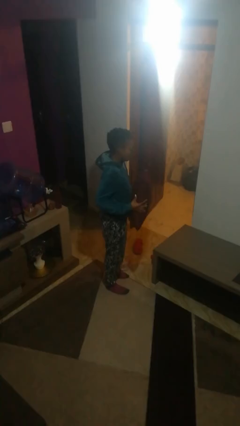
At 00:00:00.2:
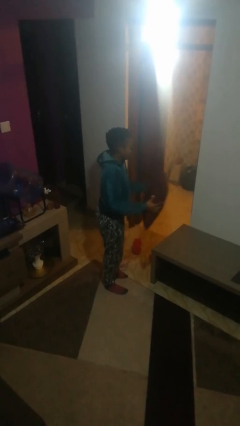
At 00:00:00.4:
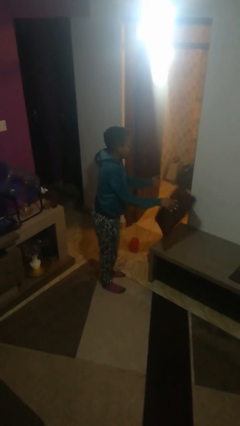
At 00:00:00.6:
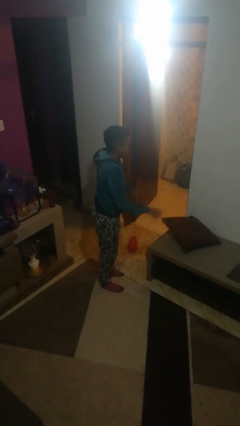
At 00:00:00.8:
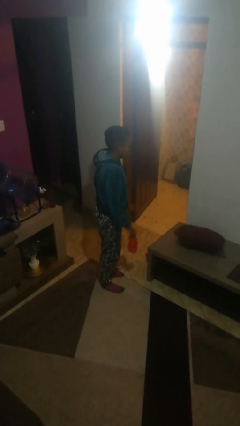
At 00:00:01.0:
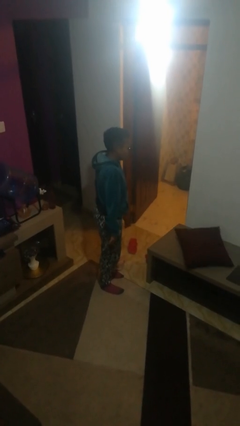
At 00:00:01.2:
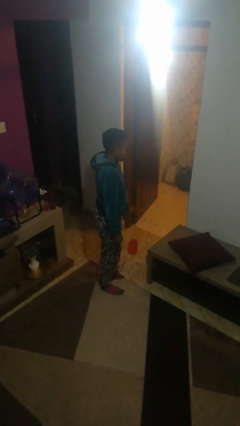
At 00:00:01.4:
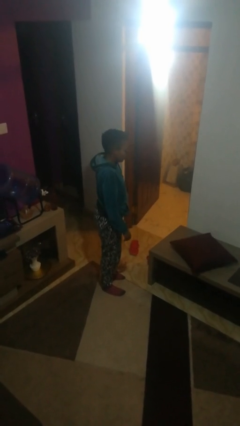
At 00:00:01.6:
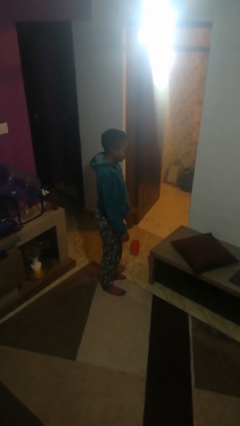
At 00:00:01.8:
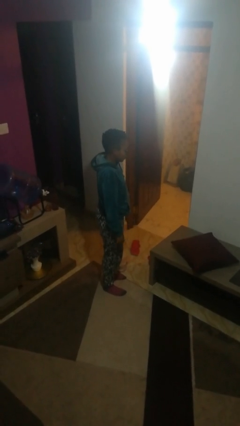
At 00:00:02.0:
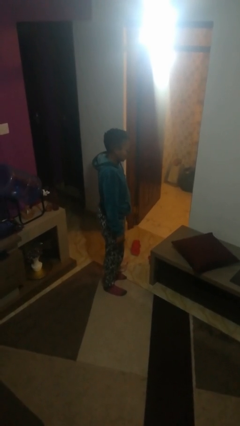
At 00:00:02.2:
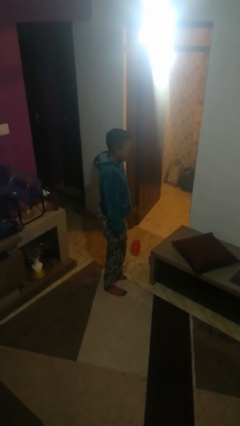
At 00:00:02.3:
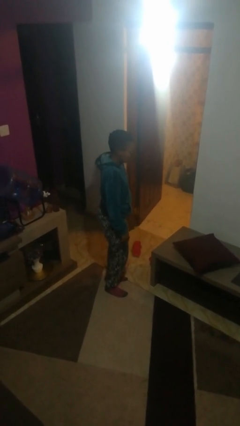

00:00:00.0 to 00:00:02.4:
person throws object on table

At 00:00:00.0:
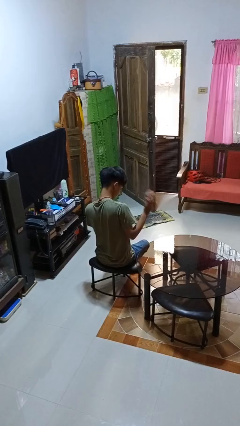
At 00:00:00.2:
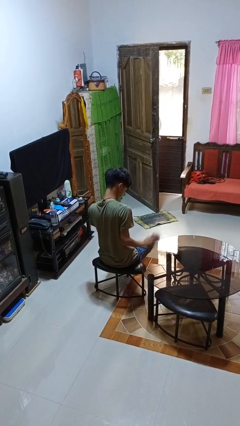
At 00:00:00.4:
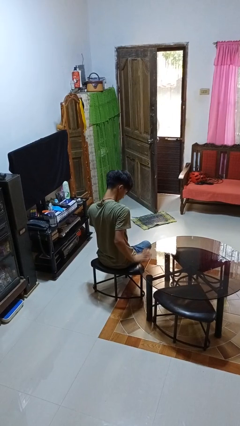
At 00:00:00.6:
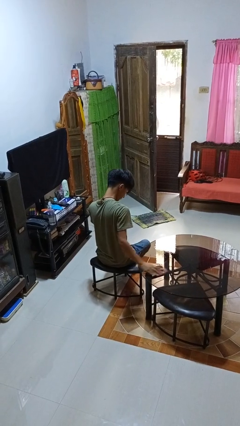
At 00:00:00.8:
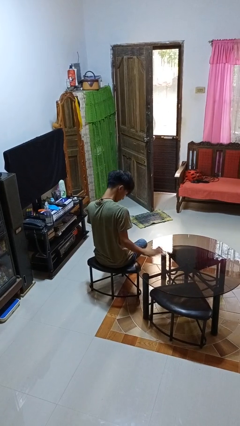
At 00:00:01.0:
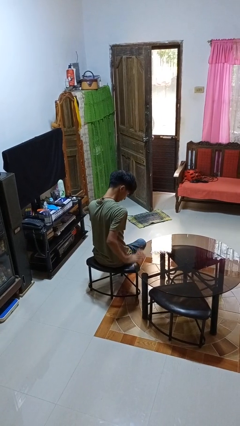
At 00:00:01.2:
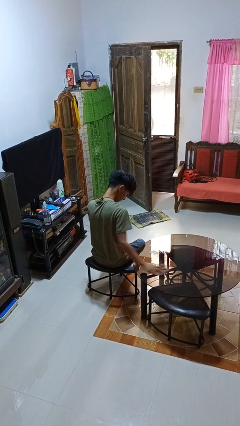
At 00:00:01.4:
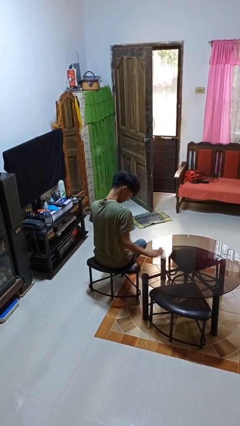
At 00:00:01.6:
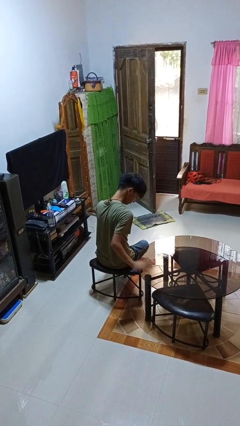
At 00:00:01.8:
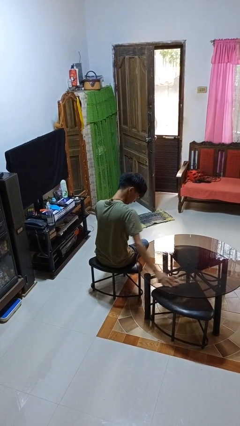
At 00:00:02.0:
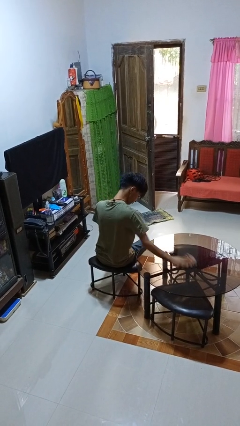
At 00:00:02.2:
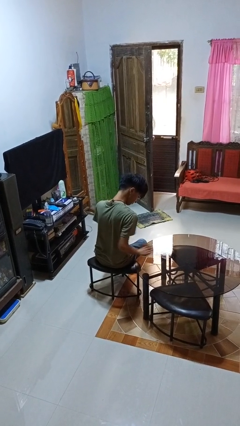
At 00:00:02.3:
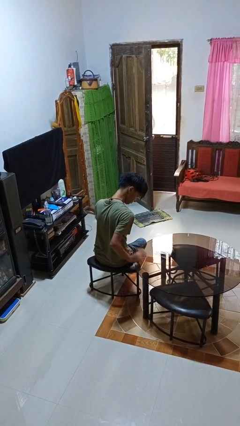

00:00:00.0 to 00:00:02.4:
person cleans table with rag

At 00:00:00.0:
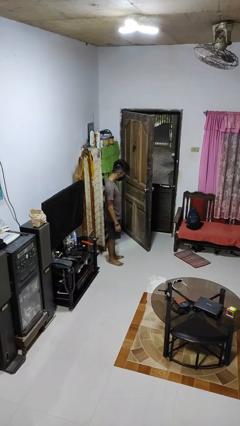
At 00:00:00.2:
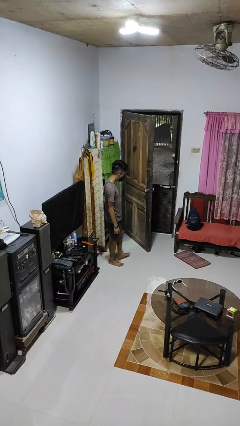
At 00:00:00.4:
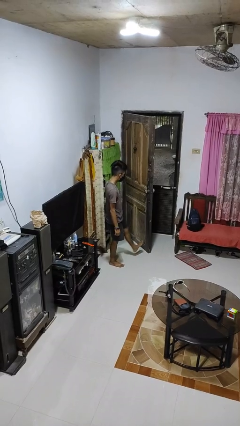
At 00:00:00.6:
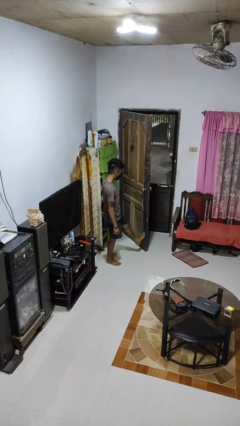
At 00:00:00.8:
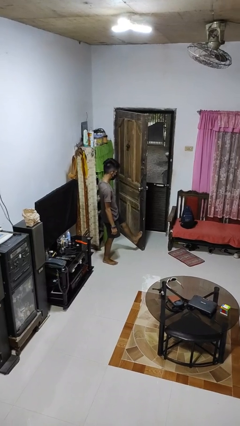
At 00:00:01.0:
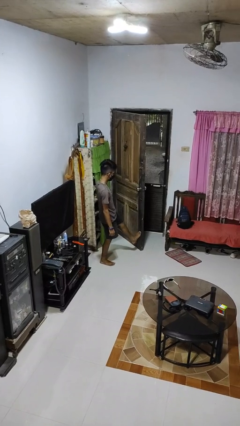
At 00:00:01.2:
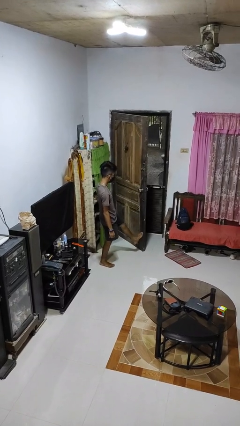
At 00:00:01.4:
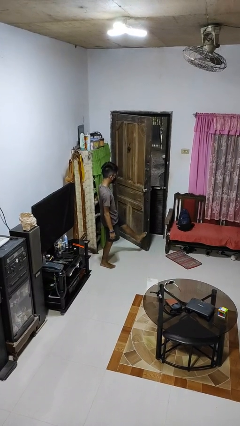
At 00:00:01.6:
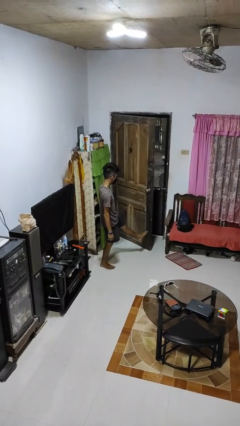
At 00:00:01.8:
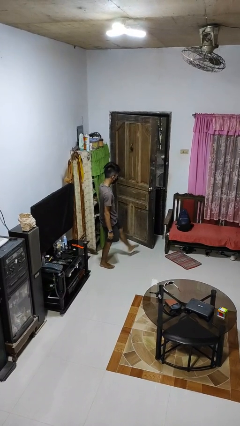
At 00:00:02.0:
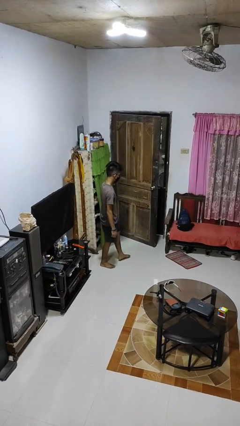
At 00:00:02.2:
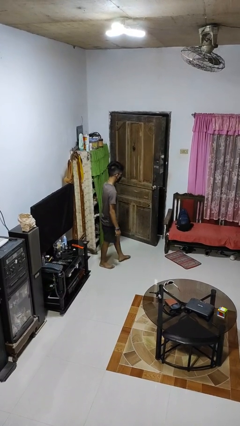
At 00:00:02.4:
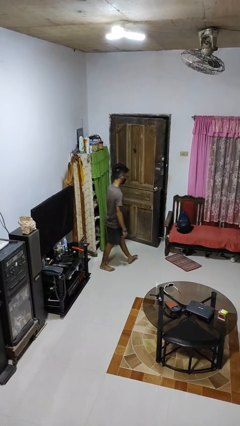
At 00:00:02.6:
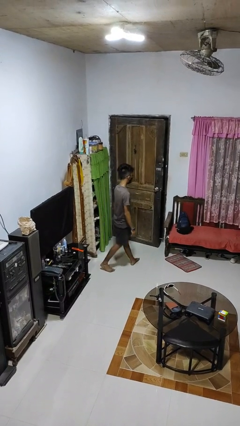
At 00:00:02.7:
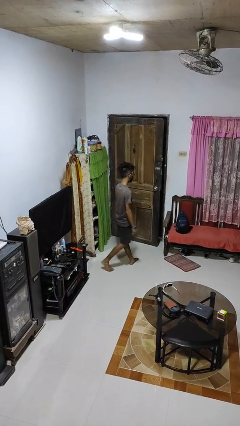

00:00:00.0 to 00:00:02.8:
person closes door with foot

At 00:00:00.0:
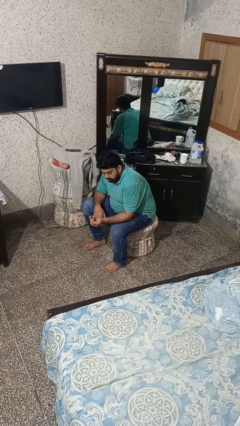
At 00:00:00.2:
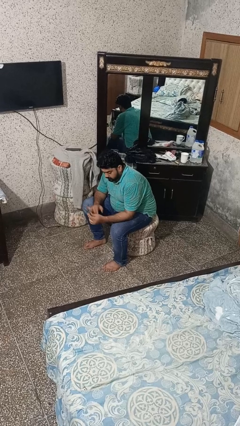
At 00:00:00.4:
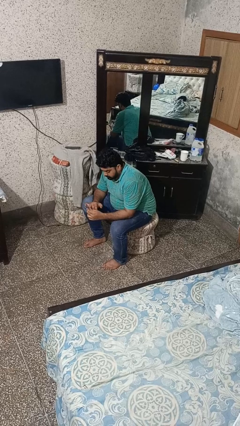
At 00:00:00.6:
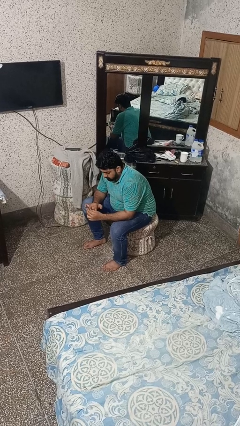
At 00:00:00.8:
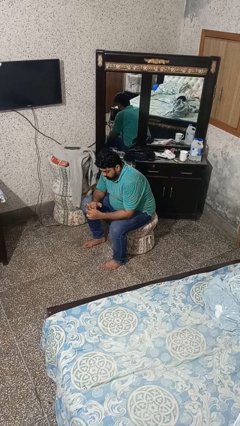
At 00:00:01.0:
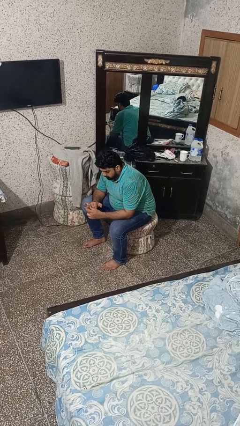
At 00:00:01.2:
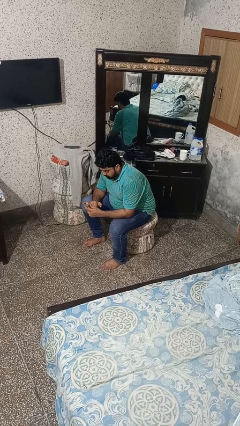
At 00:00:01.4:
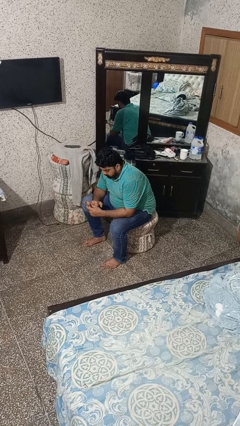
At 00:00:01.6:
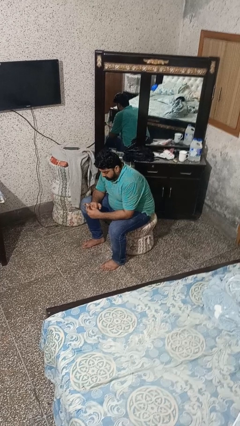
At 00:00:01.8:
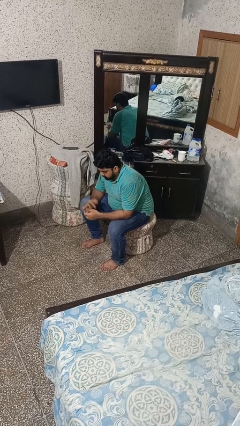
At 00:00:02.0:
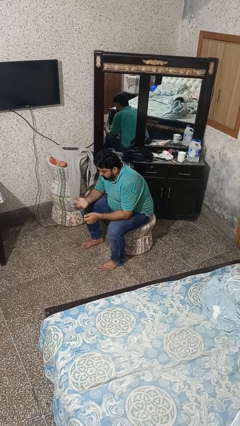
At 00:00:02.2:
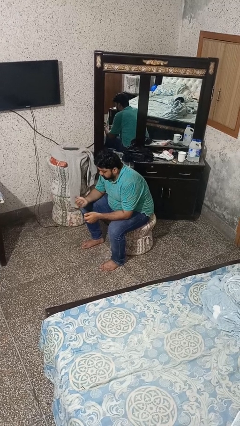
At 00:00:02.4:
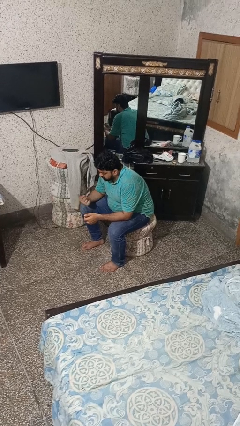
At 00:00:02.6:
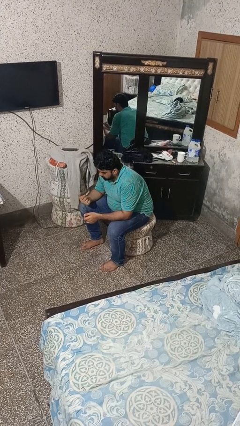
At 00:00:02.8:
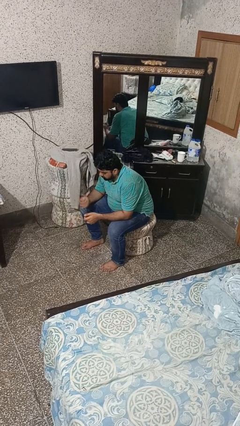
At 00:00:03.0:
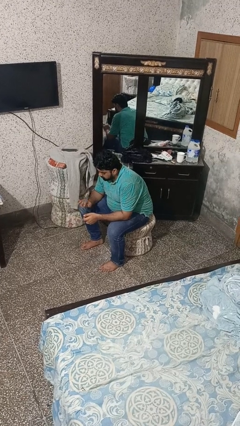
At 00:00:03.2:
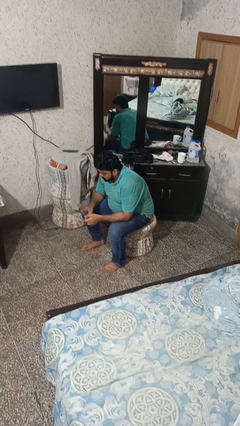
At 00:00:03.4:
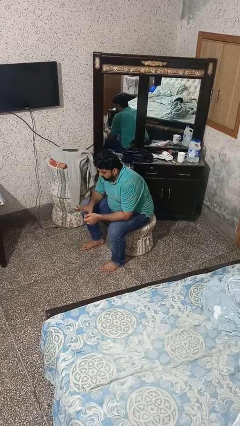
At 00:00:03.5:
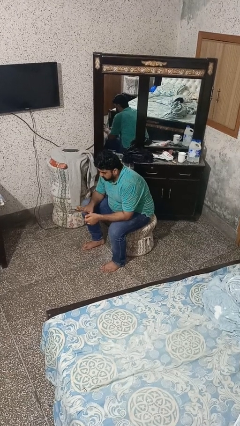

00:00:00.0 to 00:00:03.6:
person puts on ring

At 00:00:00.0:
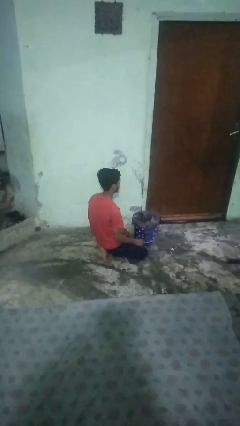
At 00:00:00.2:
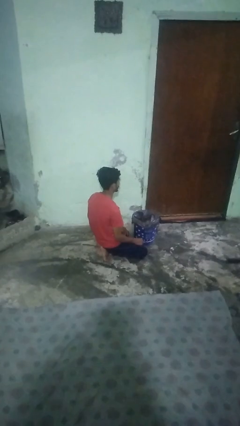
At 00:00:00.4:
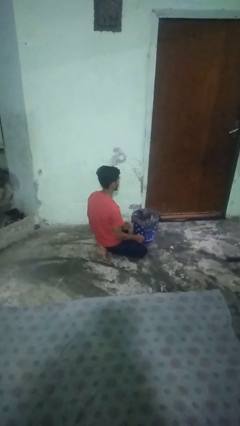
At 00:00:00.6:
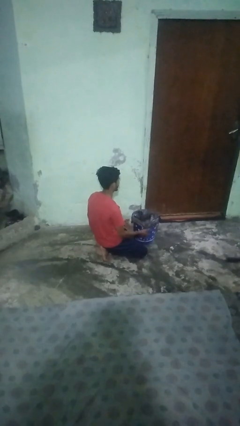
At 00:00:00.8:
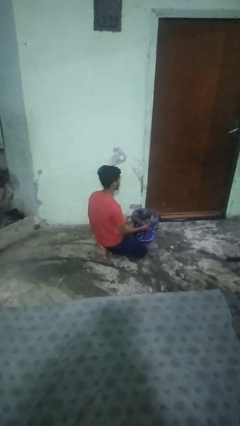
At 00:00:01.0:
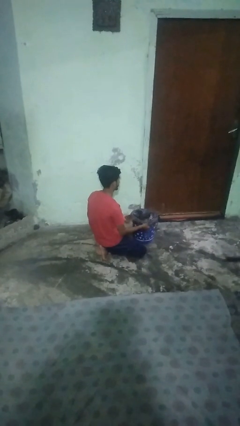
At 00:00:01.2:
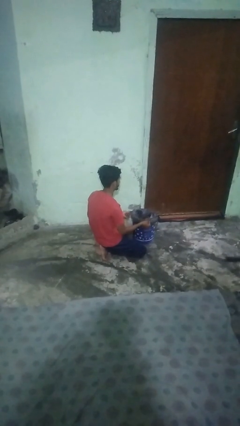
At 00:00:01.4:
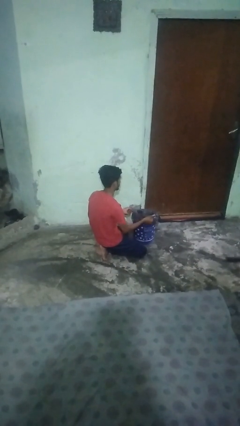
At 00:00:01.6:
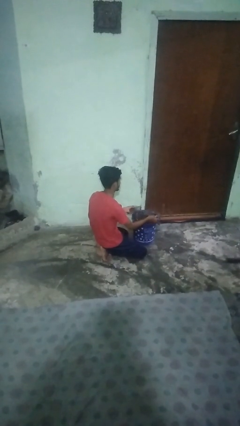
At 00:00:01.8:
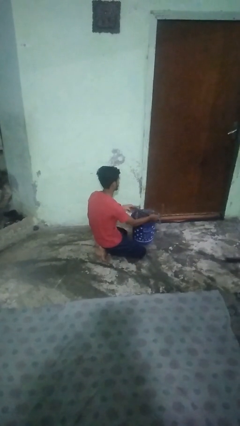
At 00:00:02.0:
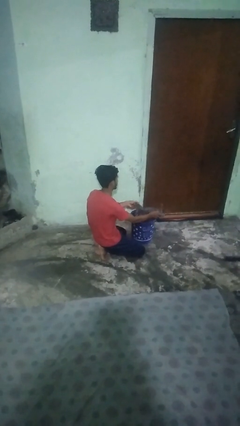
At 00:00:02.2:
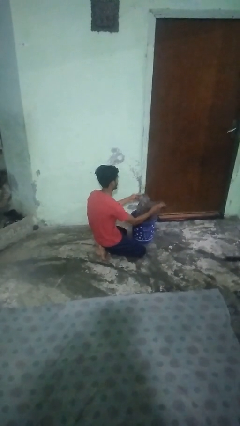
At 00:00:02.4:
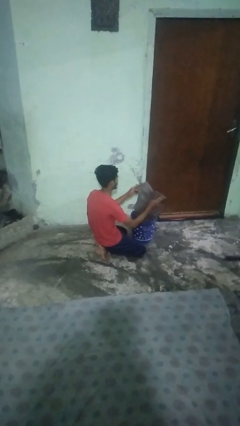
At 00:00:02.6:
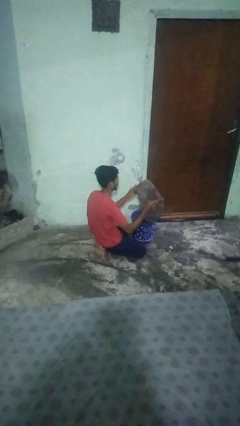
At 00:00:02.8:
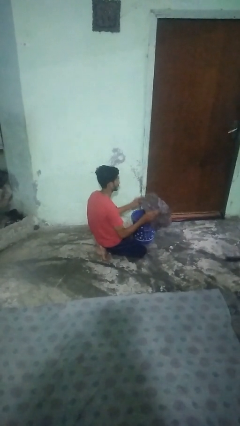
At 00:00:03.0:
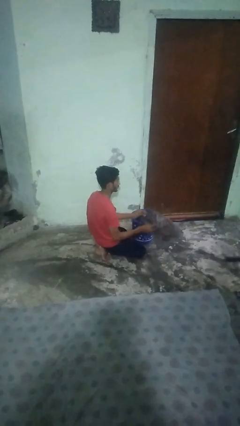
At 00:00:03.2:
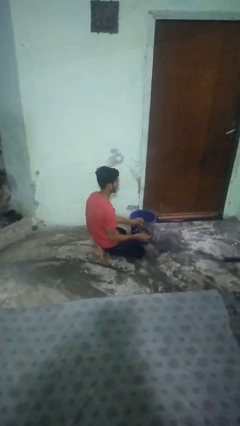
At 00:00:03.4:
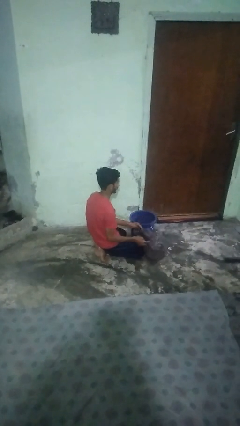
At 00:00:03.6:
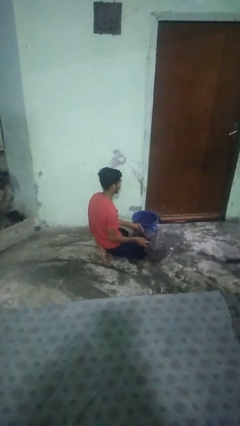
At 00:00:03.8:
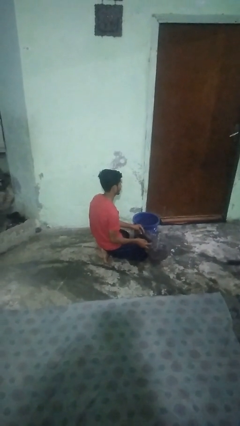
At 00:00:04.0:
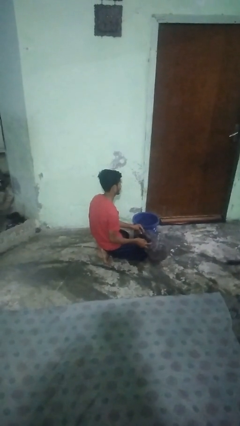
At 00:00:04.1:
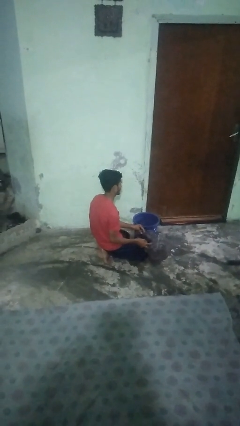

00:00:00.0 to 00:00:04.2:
person removes trashbag from trashcan

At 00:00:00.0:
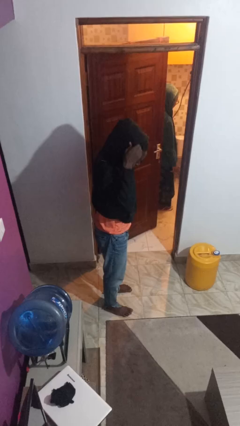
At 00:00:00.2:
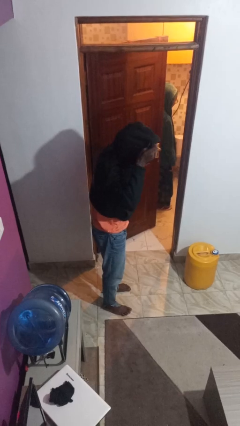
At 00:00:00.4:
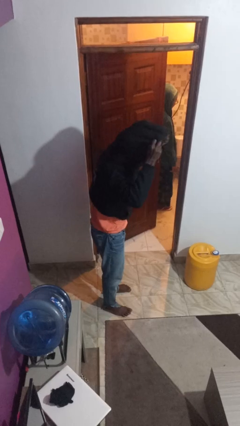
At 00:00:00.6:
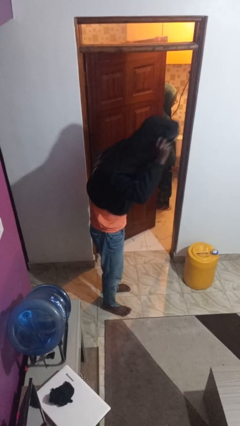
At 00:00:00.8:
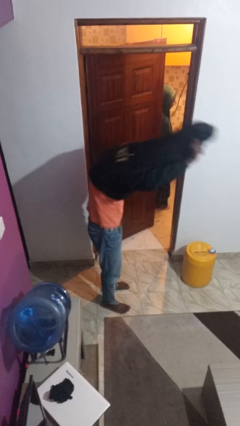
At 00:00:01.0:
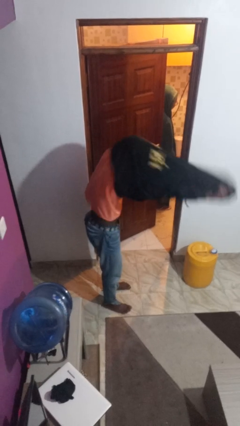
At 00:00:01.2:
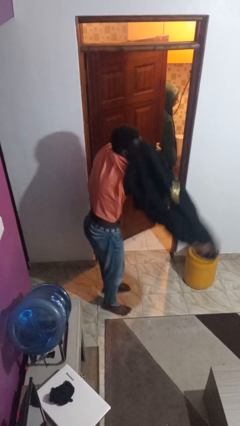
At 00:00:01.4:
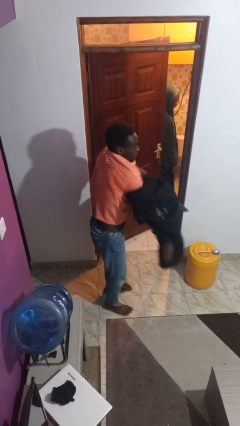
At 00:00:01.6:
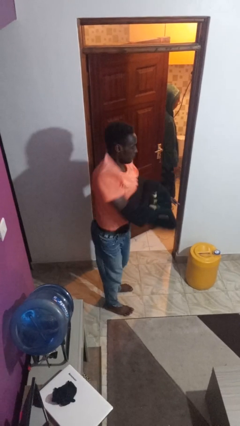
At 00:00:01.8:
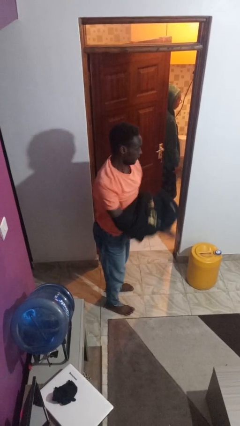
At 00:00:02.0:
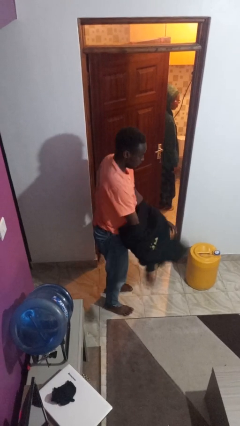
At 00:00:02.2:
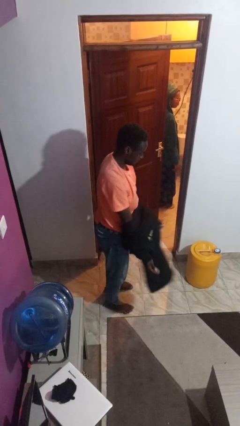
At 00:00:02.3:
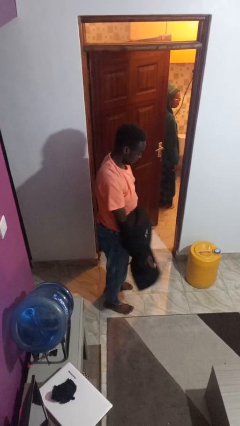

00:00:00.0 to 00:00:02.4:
person takes off hoodie
